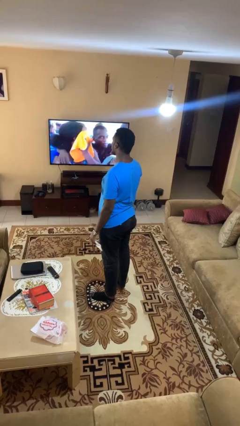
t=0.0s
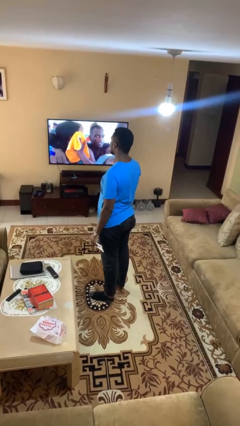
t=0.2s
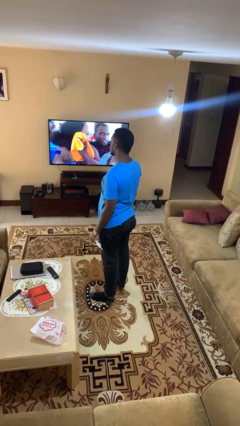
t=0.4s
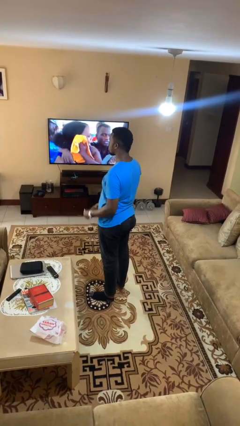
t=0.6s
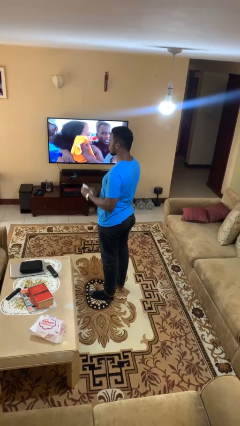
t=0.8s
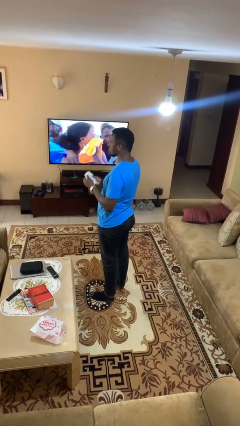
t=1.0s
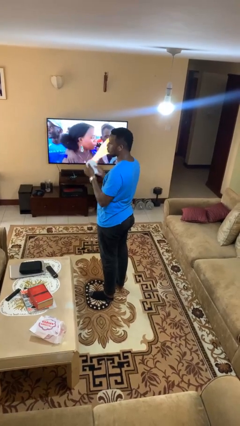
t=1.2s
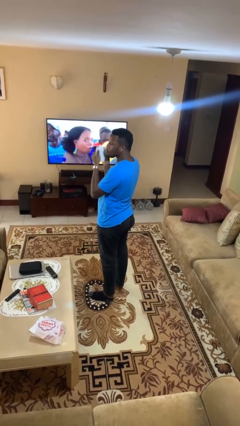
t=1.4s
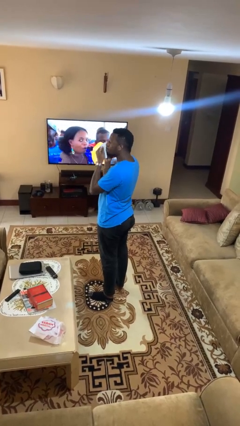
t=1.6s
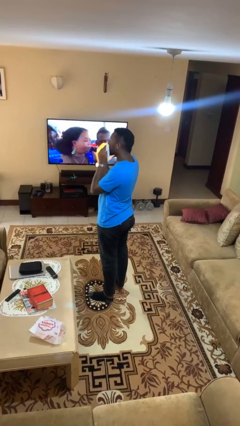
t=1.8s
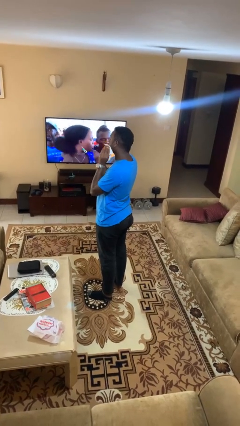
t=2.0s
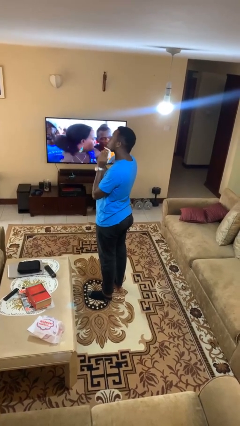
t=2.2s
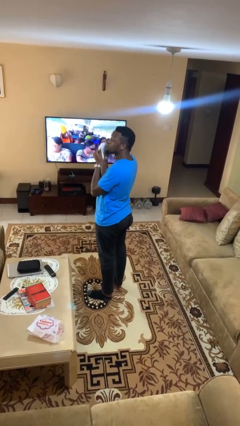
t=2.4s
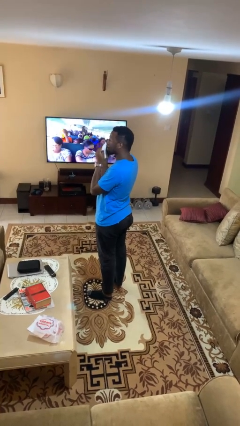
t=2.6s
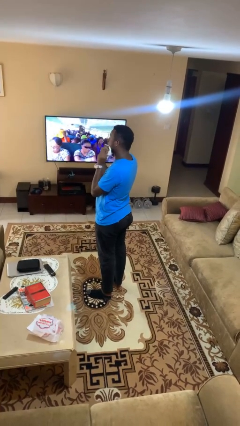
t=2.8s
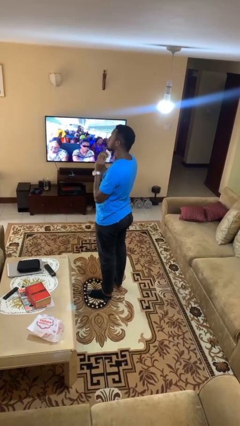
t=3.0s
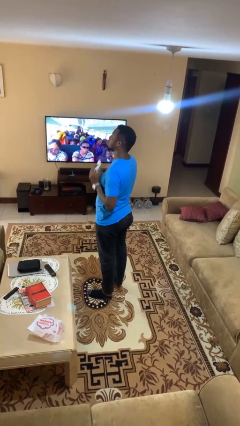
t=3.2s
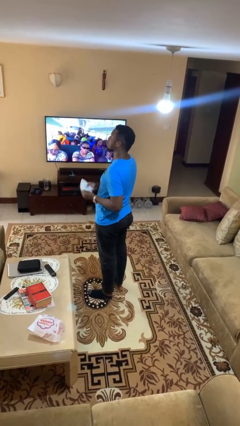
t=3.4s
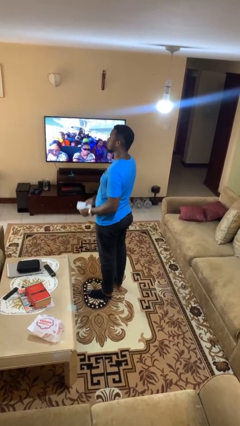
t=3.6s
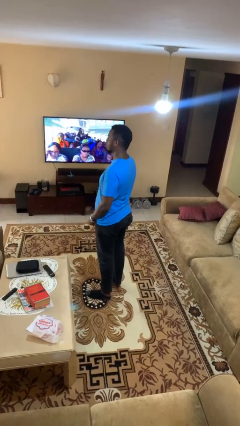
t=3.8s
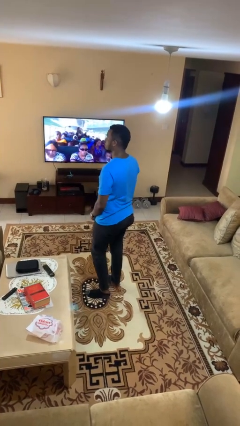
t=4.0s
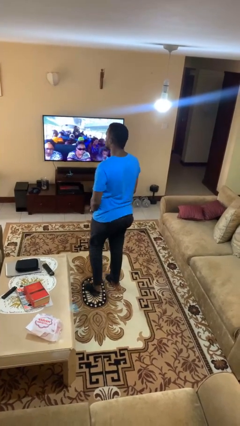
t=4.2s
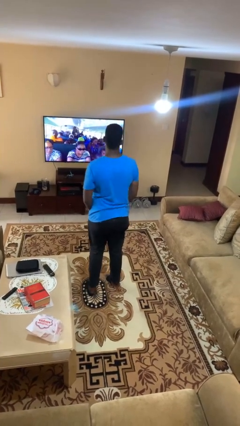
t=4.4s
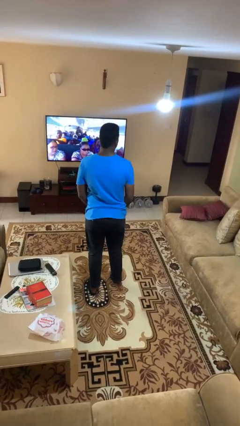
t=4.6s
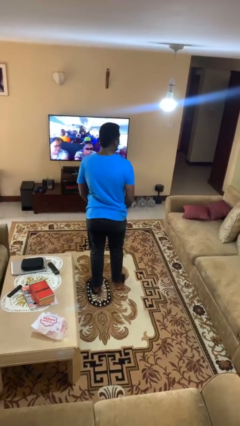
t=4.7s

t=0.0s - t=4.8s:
person wipes mouth with napkin

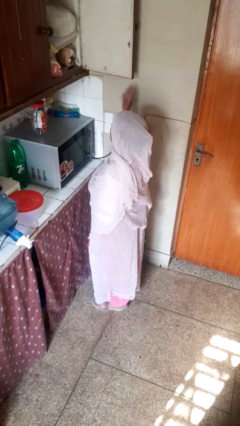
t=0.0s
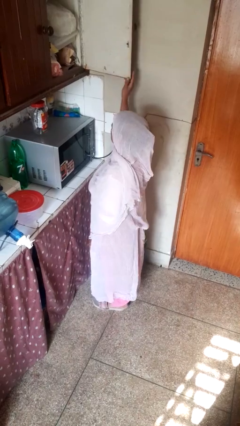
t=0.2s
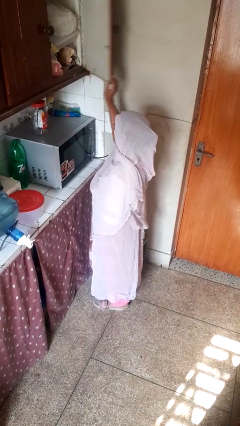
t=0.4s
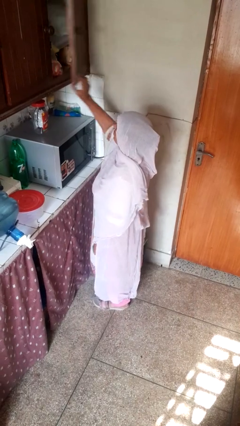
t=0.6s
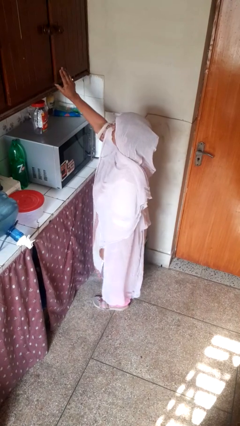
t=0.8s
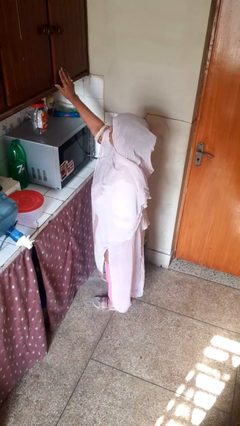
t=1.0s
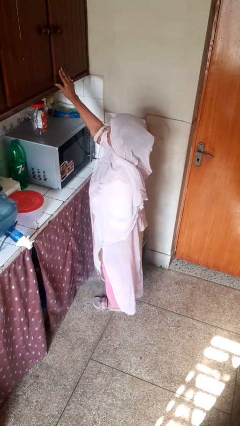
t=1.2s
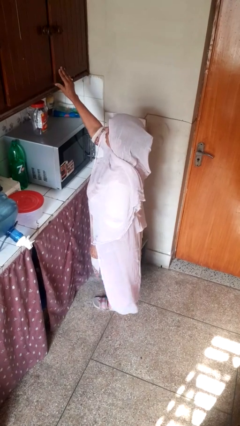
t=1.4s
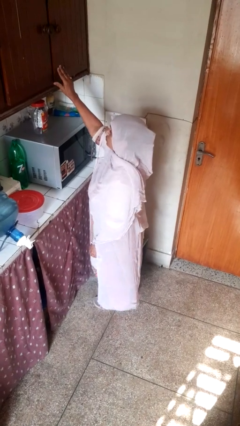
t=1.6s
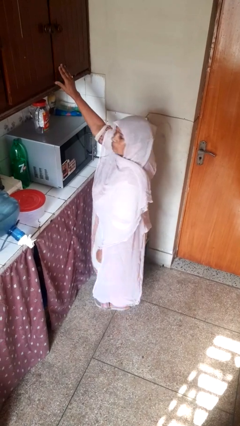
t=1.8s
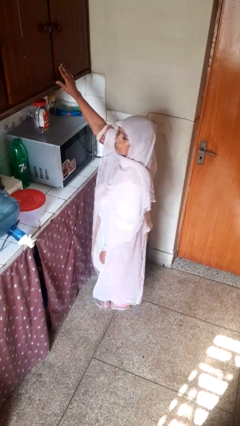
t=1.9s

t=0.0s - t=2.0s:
person closes cabinet

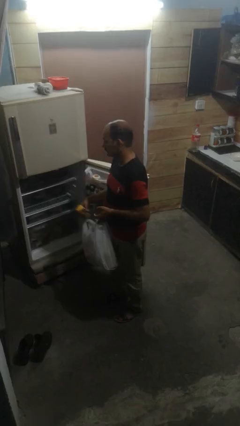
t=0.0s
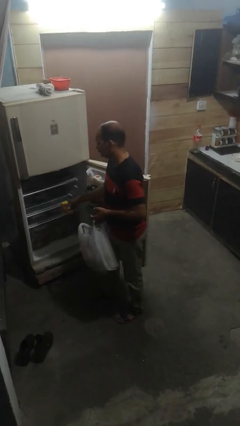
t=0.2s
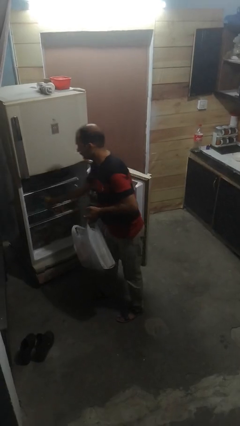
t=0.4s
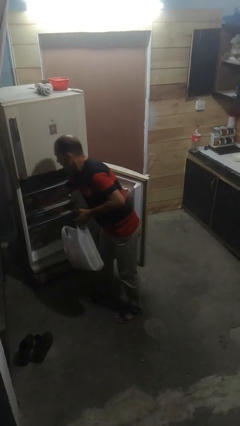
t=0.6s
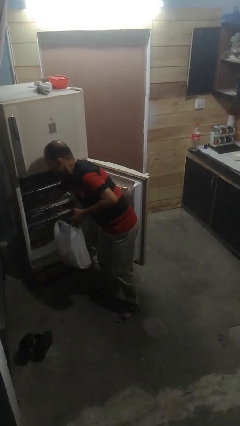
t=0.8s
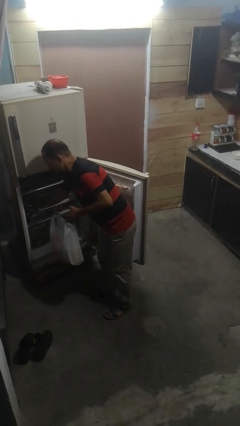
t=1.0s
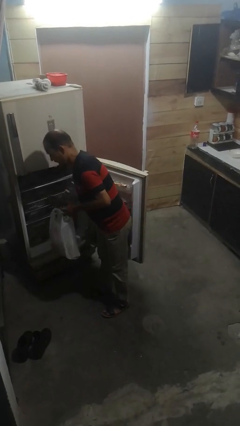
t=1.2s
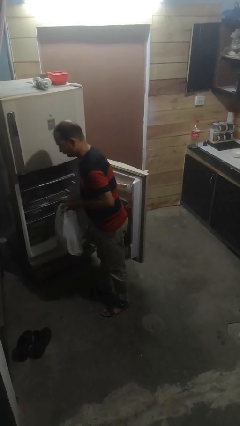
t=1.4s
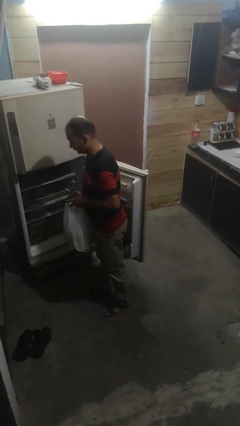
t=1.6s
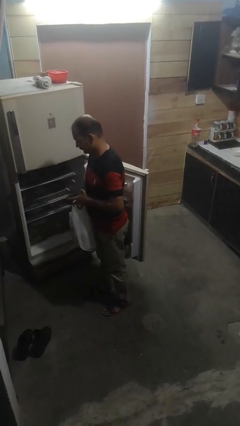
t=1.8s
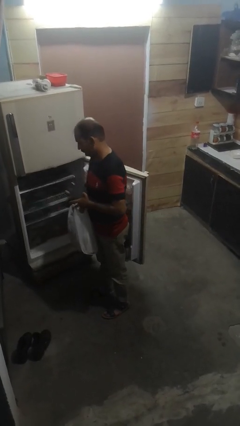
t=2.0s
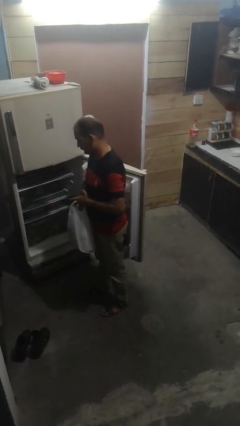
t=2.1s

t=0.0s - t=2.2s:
person loads groceries into refrigerator

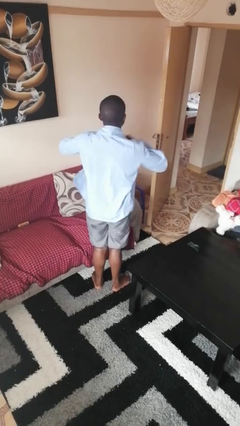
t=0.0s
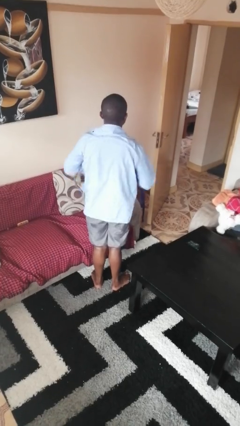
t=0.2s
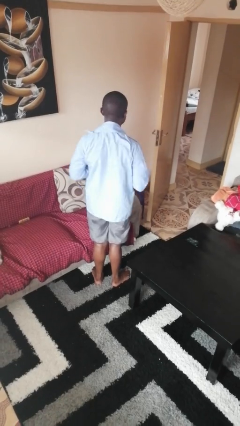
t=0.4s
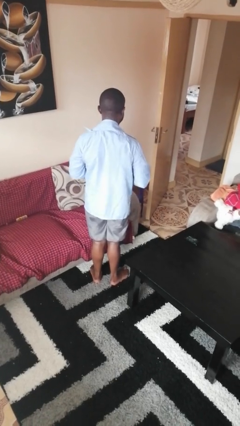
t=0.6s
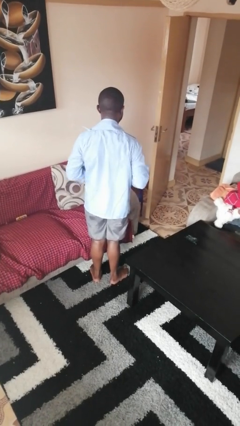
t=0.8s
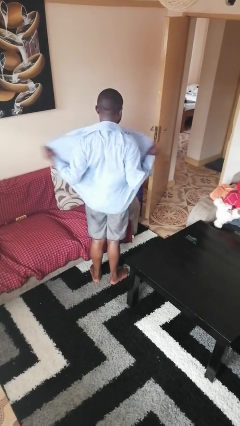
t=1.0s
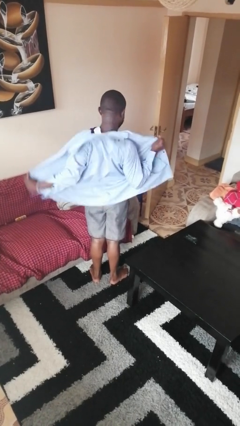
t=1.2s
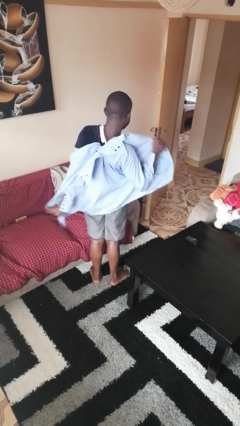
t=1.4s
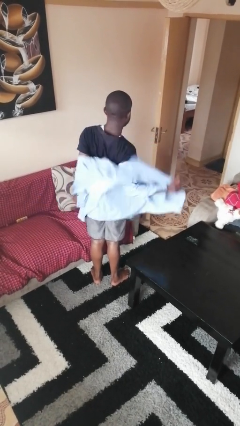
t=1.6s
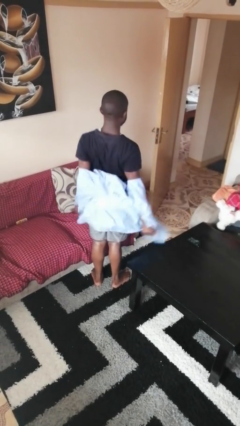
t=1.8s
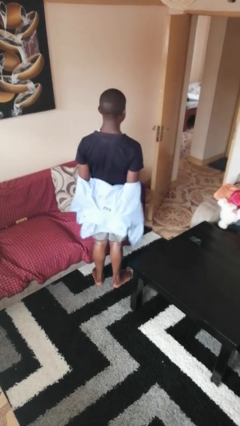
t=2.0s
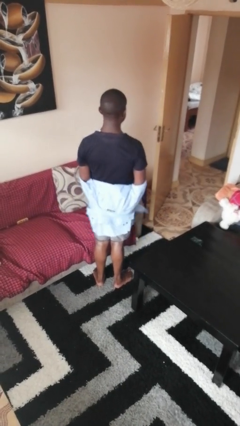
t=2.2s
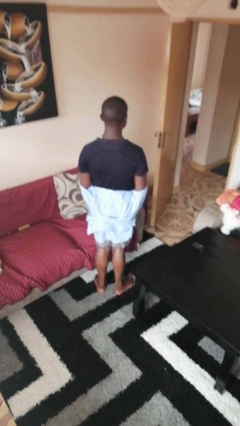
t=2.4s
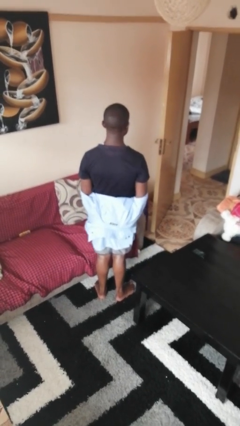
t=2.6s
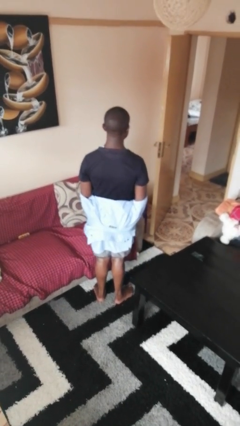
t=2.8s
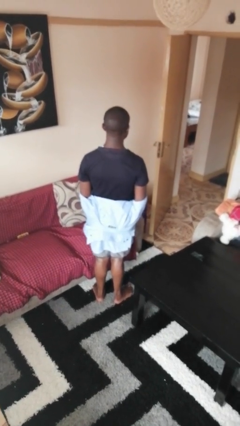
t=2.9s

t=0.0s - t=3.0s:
person takes off shirt

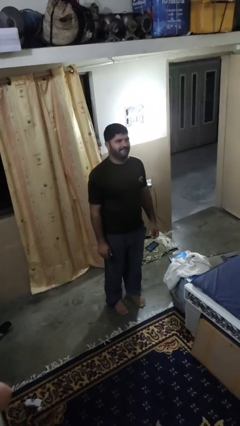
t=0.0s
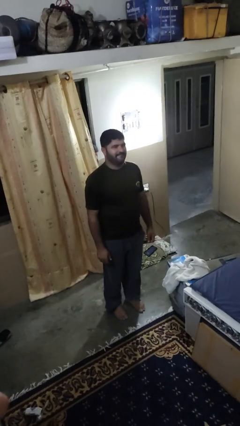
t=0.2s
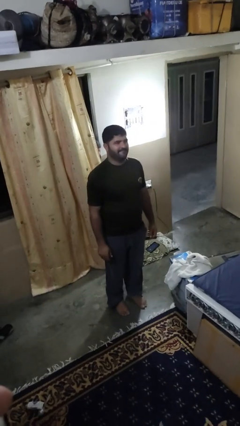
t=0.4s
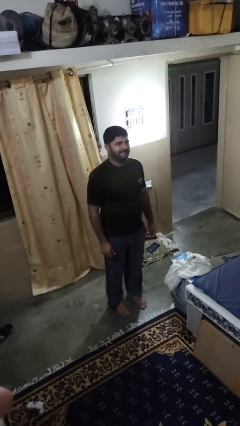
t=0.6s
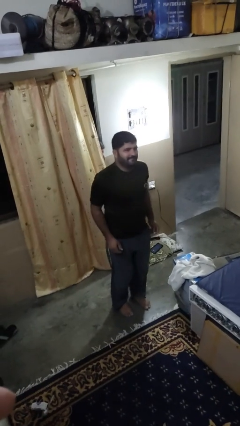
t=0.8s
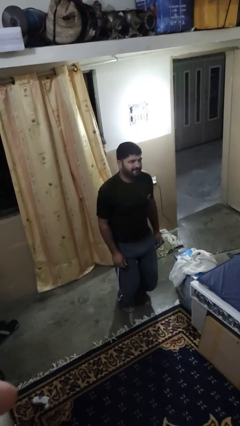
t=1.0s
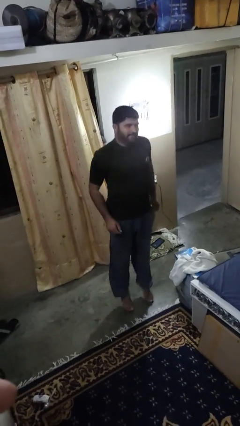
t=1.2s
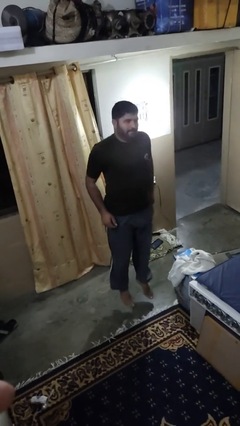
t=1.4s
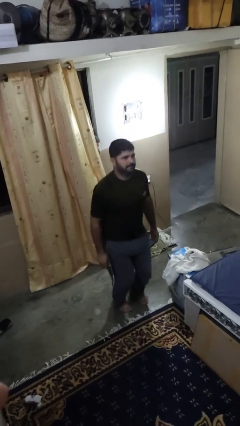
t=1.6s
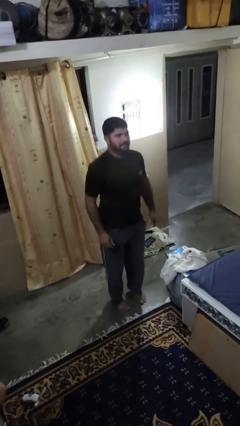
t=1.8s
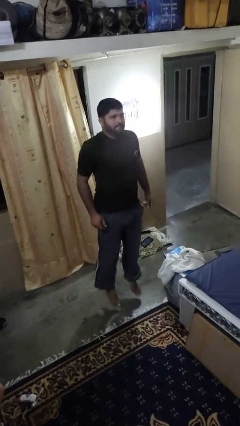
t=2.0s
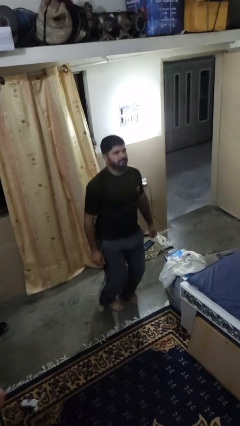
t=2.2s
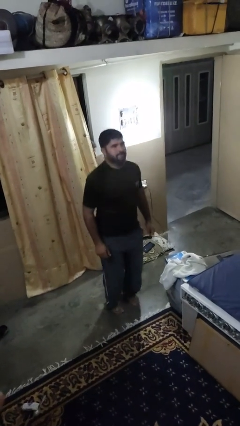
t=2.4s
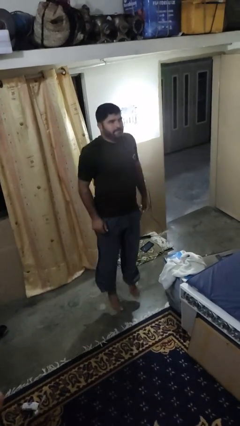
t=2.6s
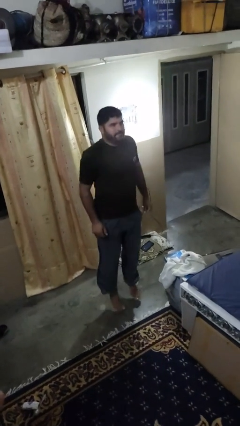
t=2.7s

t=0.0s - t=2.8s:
person jumps

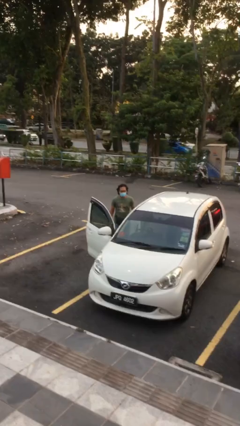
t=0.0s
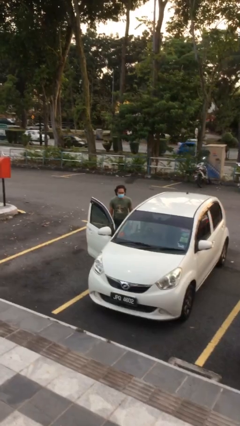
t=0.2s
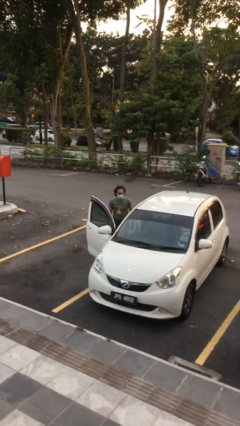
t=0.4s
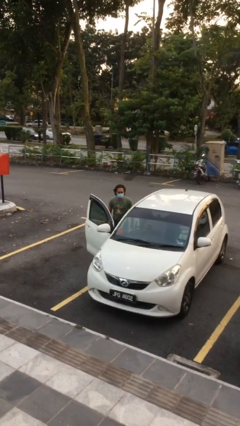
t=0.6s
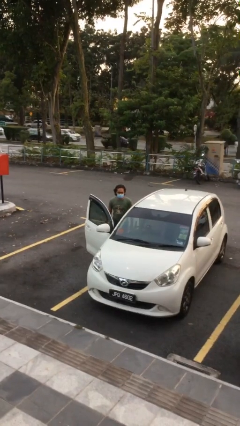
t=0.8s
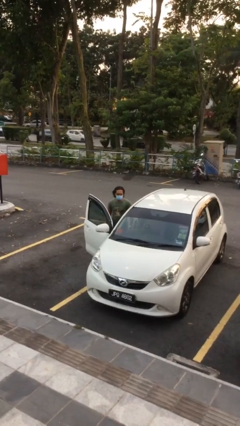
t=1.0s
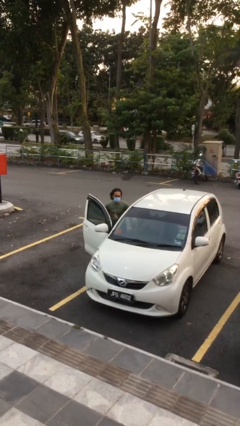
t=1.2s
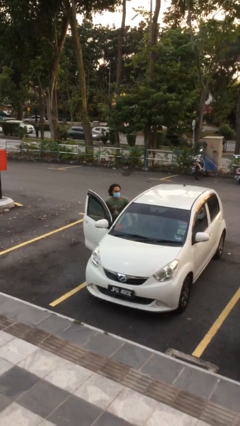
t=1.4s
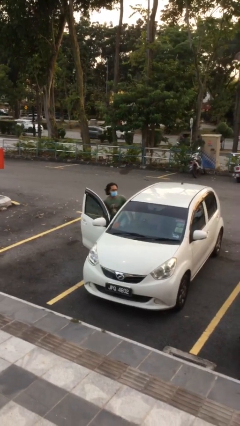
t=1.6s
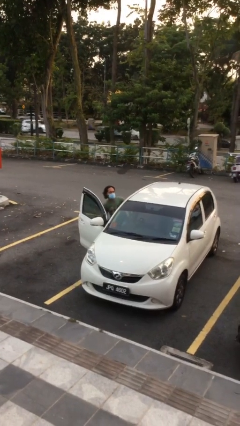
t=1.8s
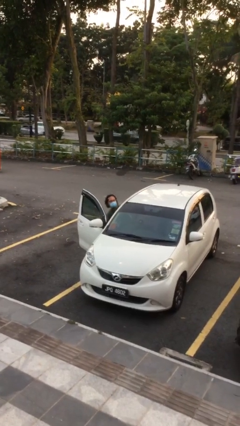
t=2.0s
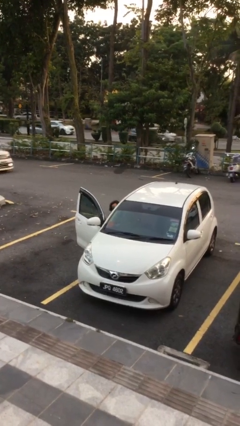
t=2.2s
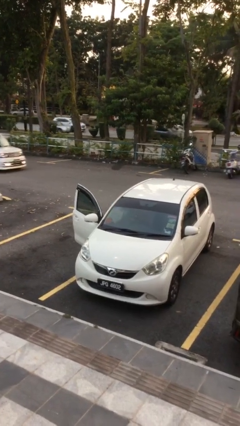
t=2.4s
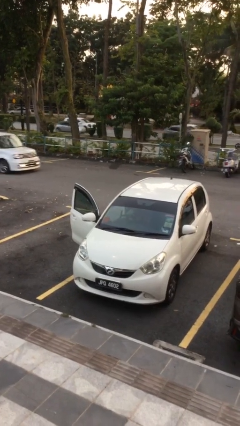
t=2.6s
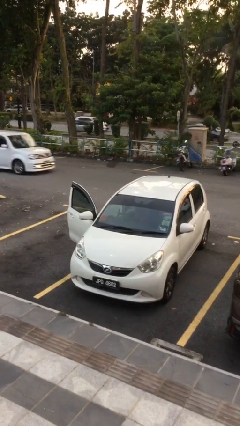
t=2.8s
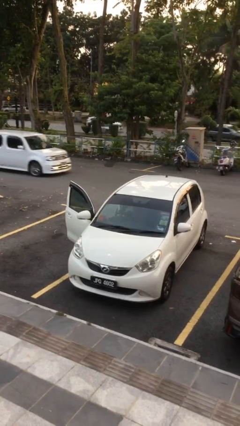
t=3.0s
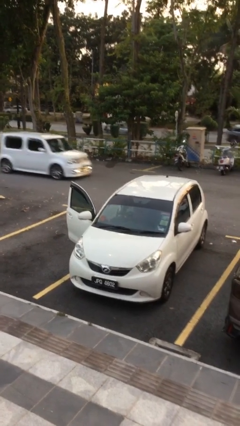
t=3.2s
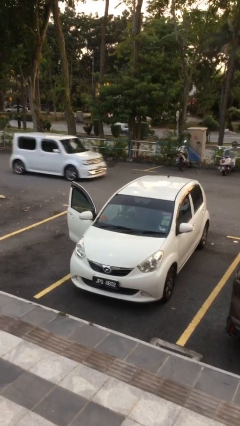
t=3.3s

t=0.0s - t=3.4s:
person enters car
